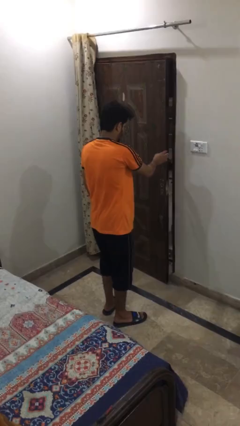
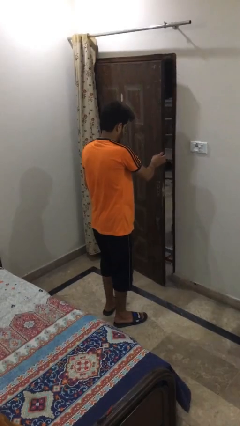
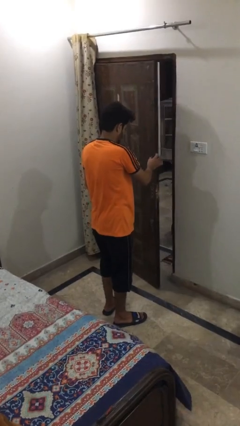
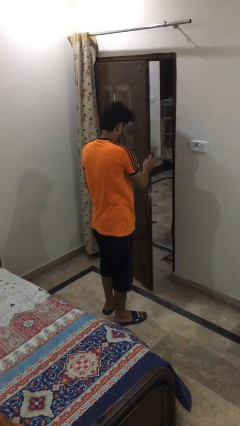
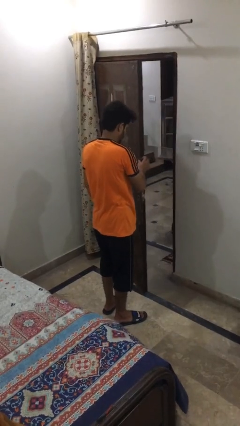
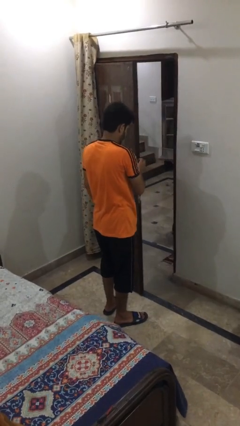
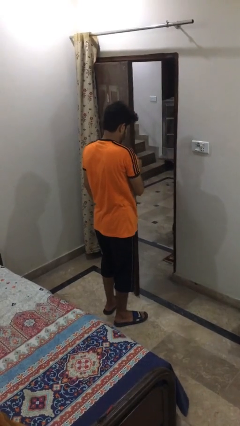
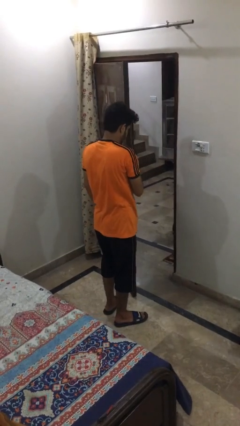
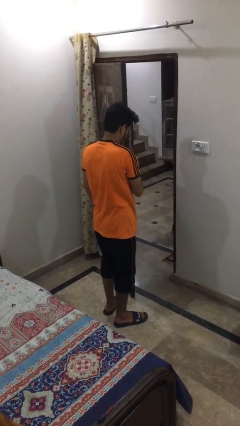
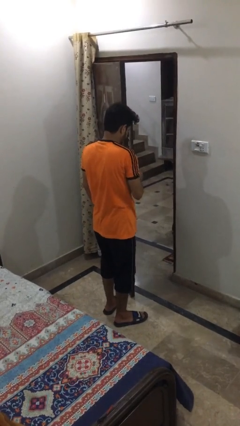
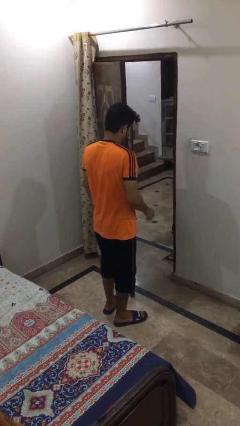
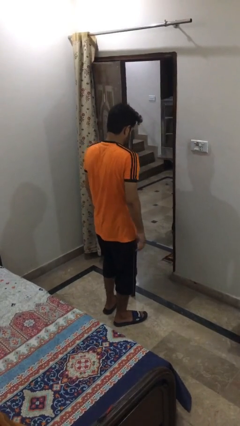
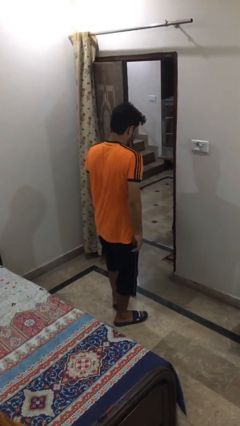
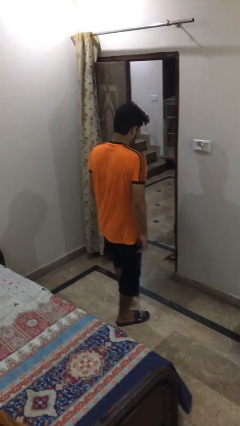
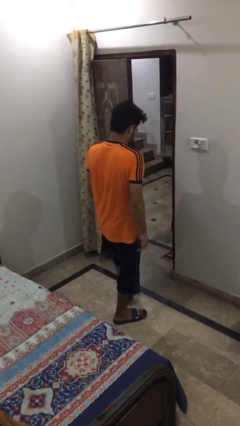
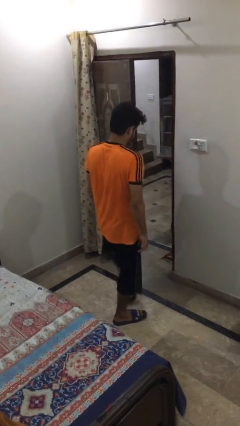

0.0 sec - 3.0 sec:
person opens facility door

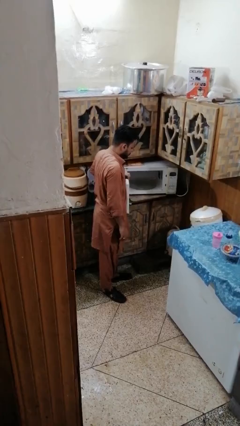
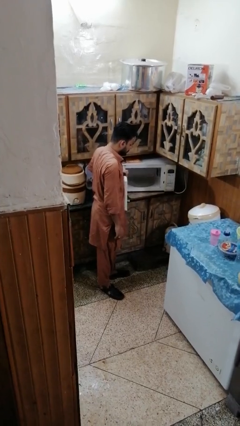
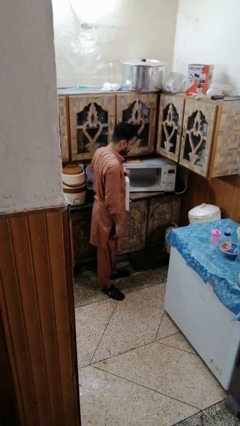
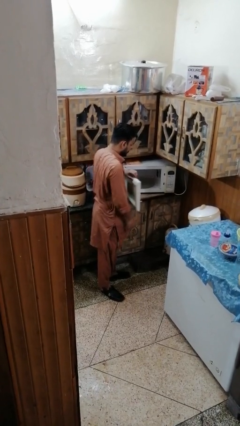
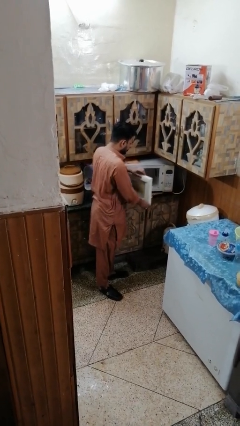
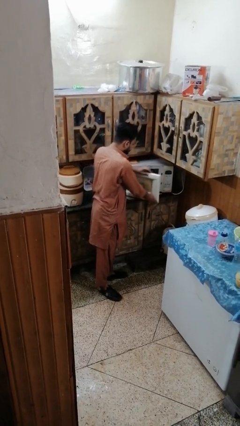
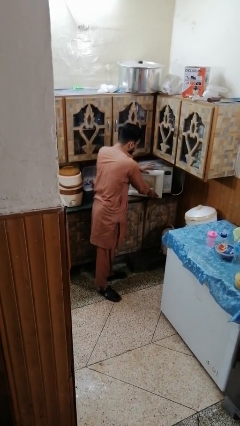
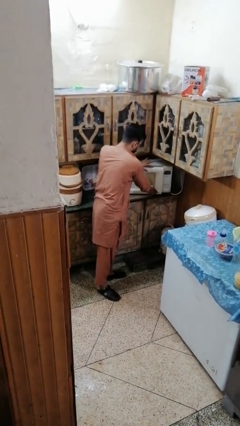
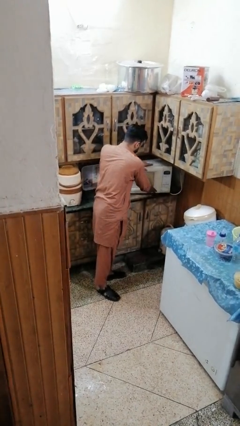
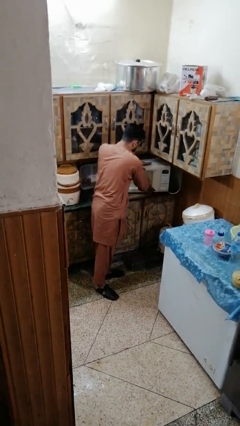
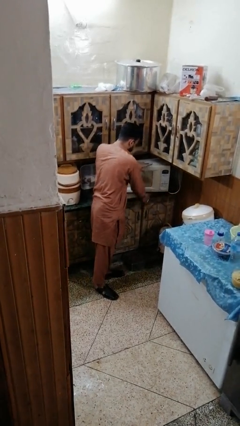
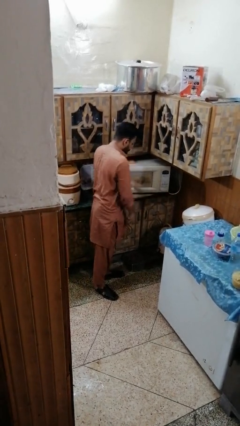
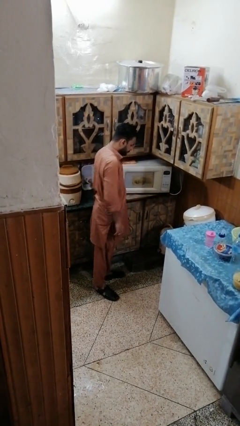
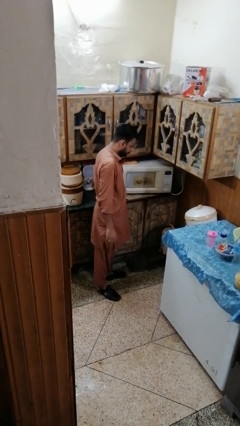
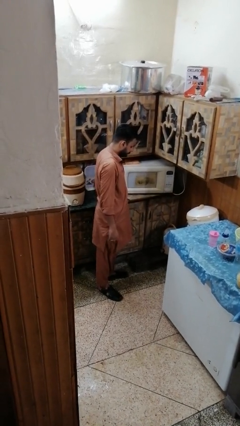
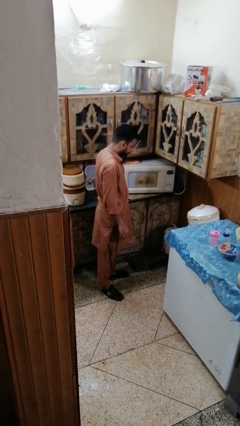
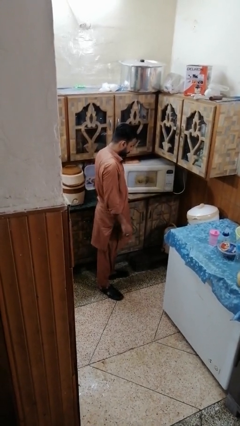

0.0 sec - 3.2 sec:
person closes microwave

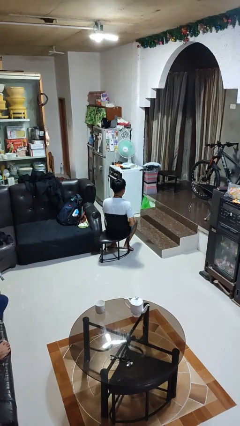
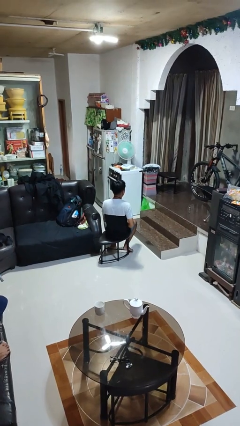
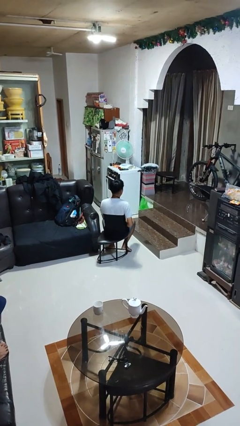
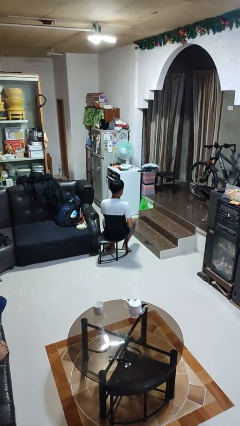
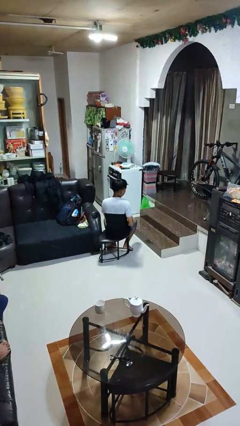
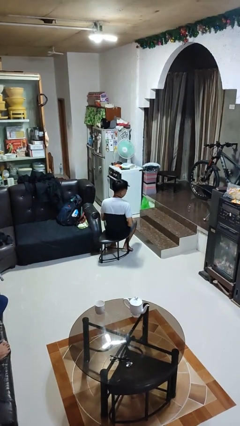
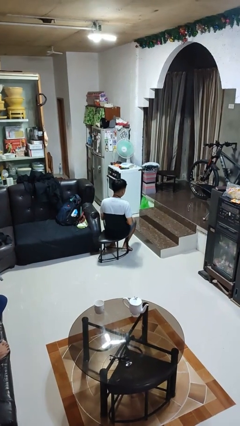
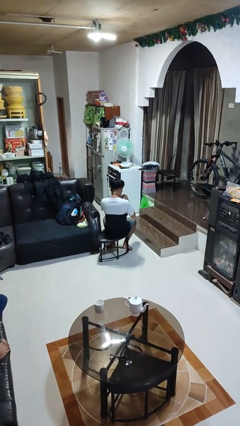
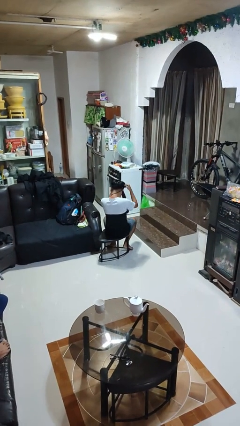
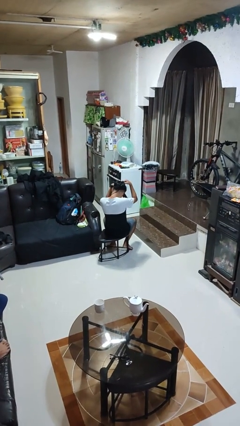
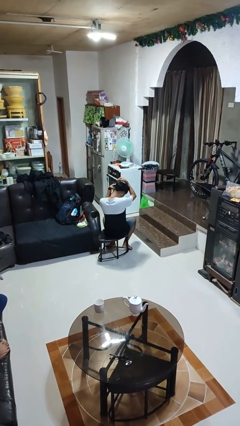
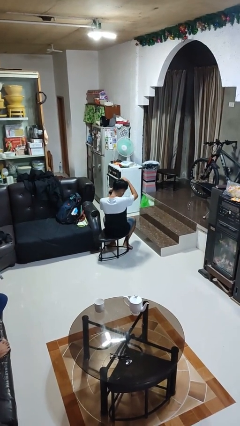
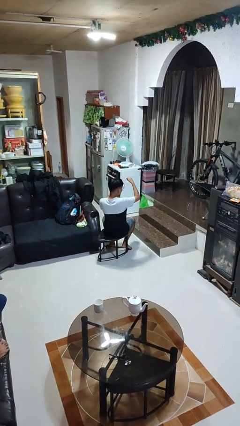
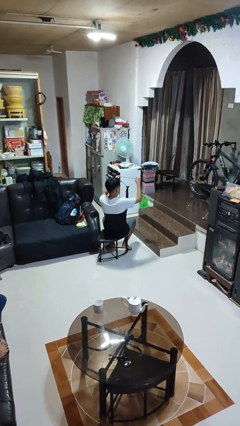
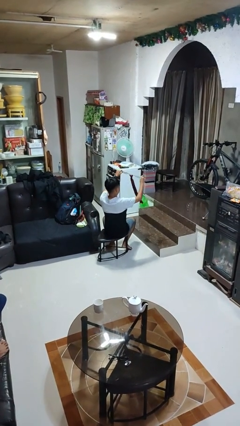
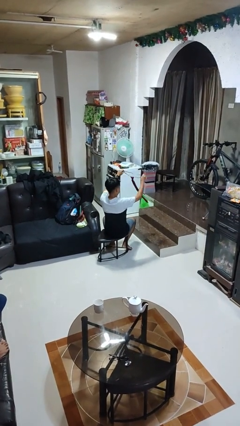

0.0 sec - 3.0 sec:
person takes off necktie

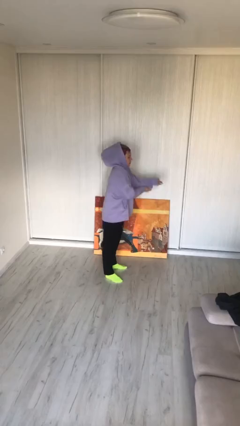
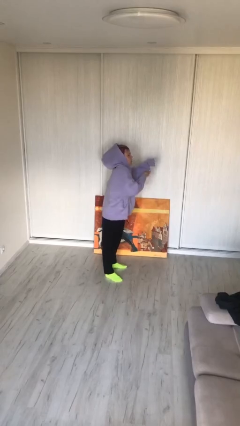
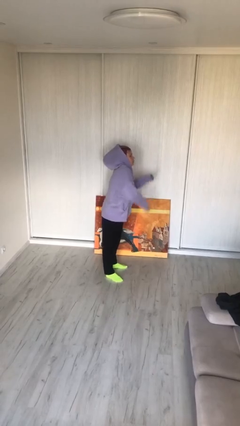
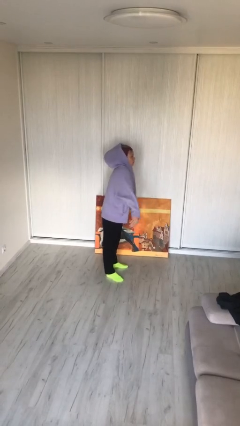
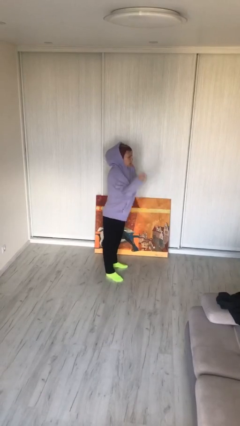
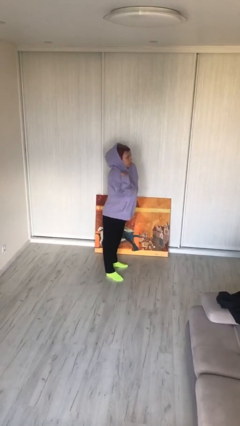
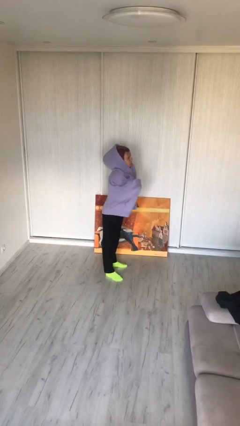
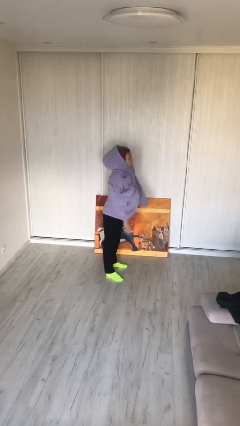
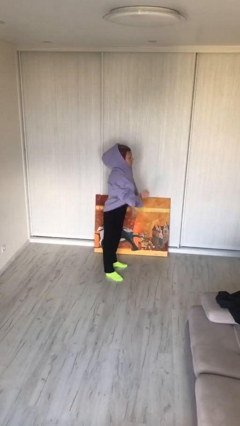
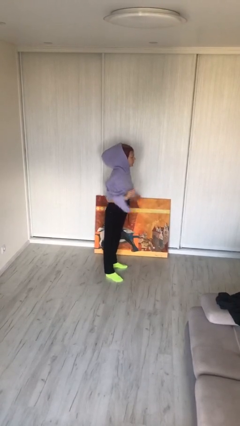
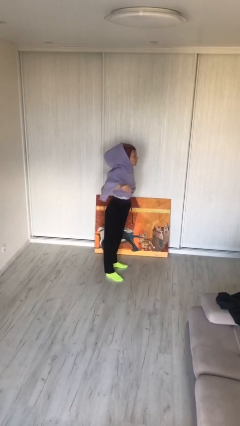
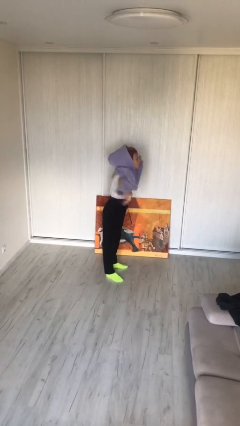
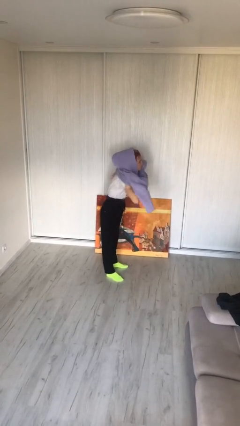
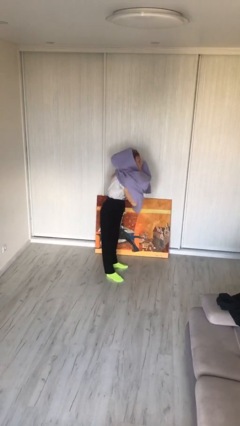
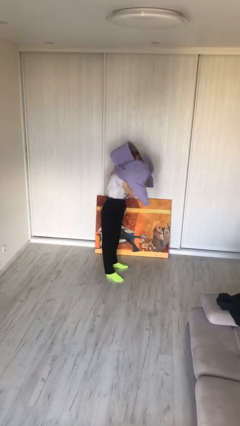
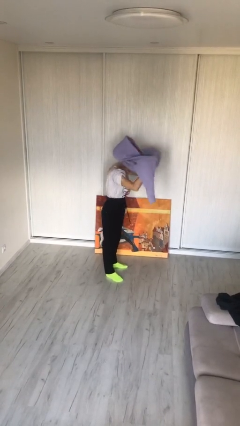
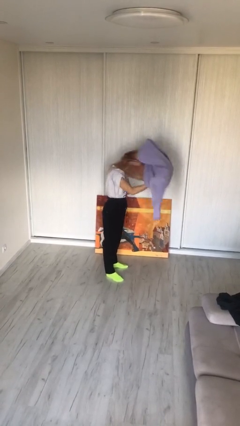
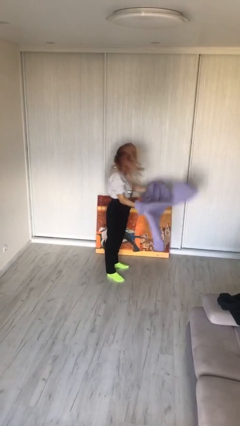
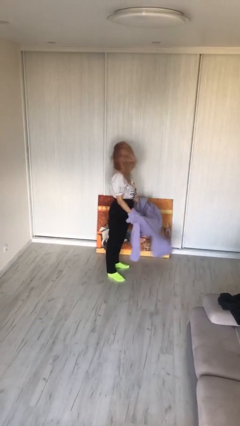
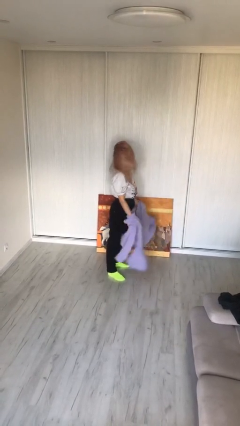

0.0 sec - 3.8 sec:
person takes off hoodie

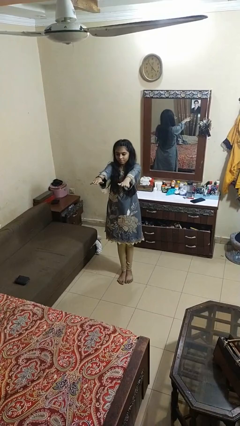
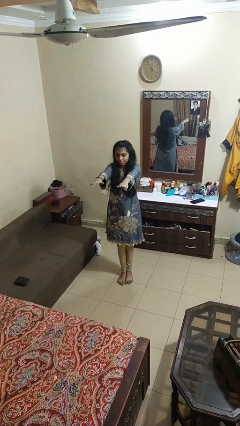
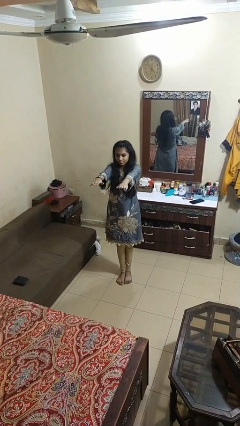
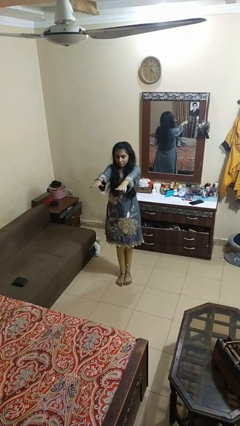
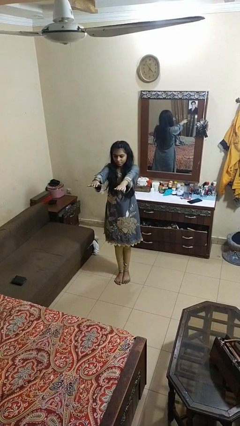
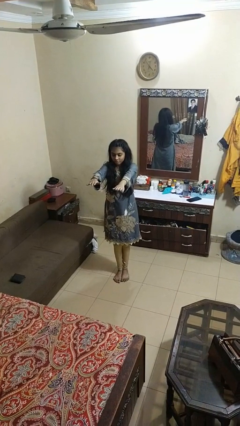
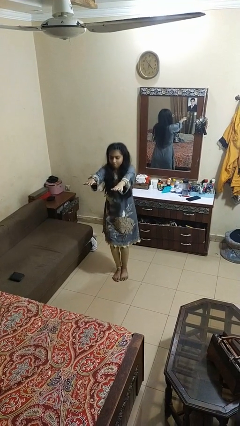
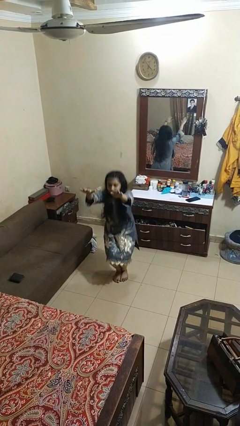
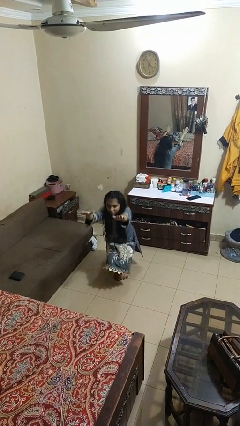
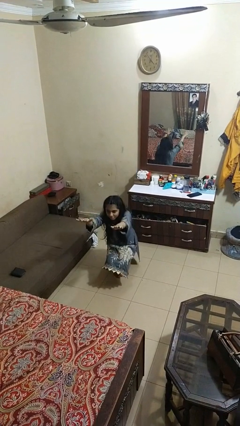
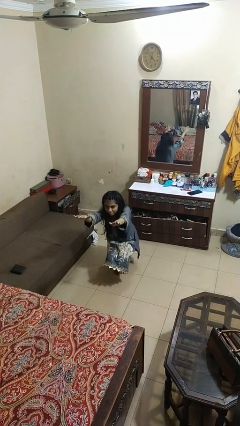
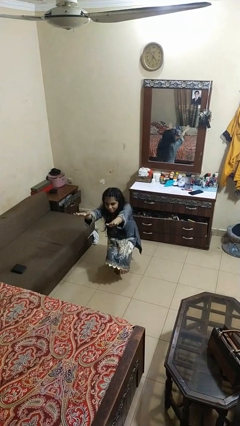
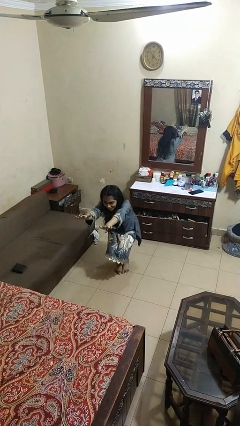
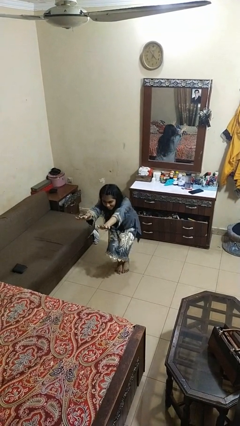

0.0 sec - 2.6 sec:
person squats

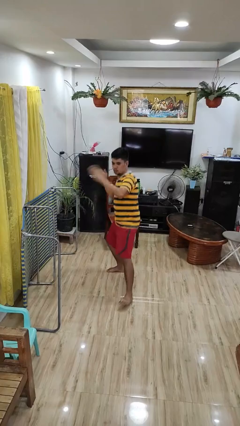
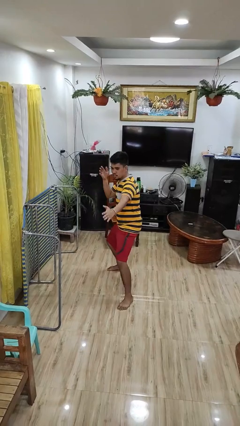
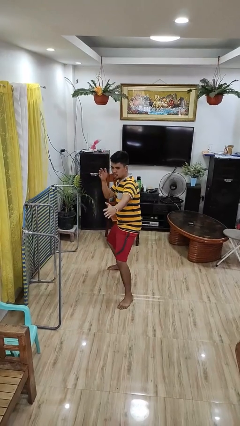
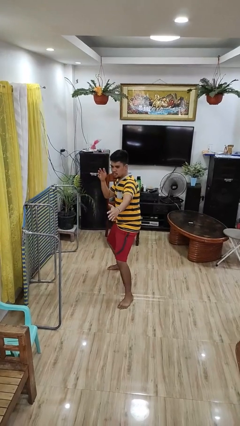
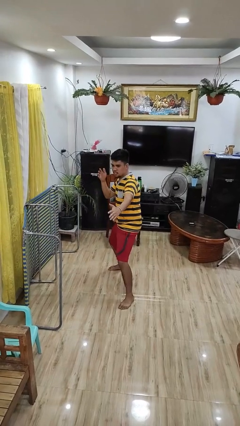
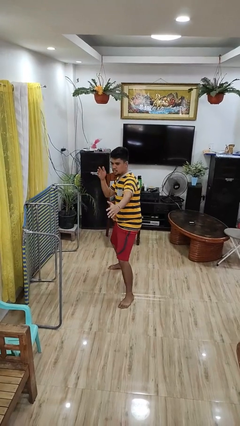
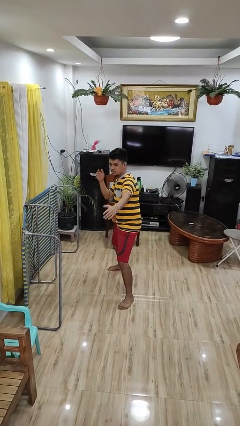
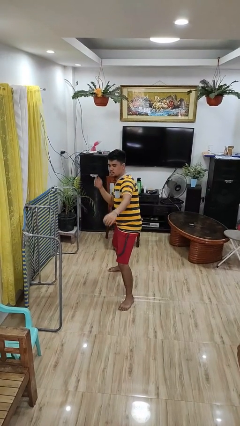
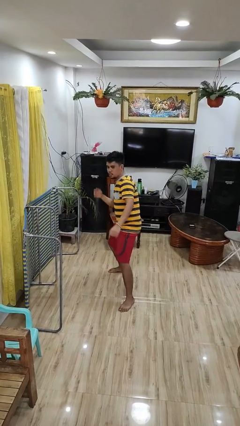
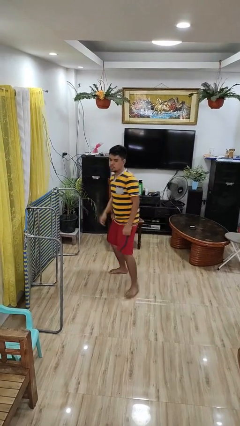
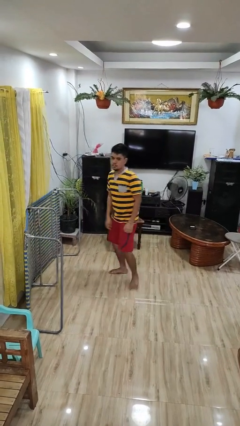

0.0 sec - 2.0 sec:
person karate chop
